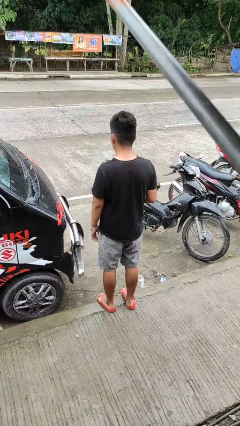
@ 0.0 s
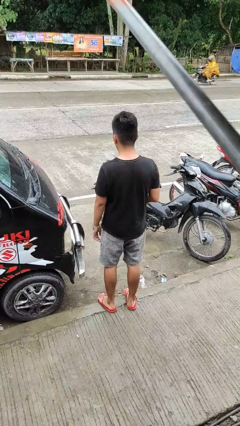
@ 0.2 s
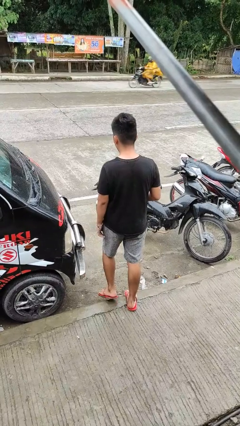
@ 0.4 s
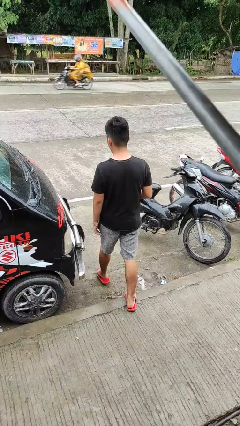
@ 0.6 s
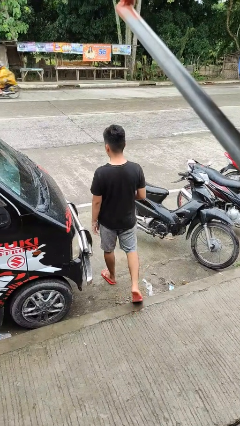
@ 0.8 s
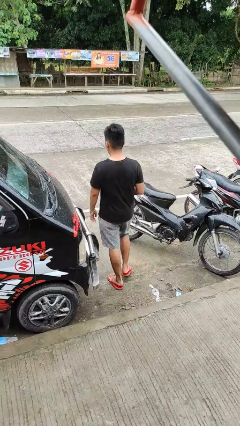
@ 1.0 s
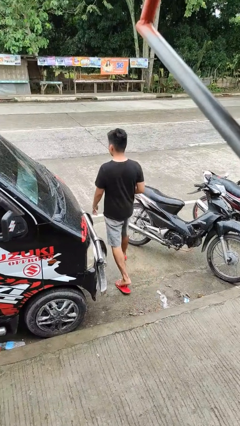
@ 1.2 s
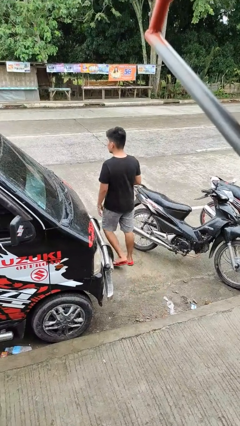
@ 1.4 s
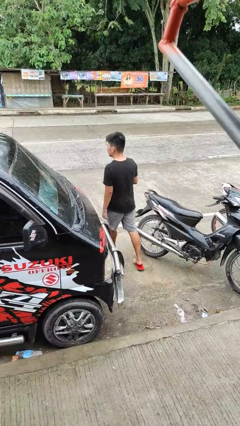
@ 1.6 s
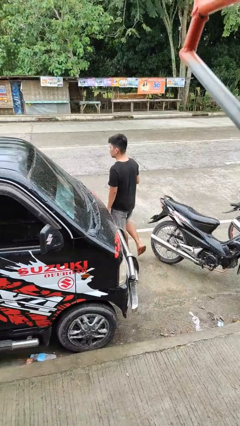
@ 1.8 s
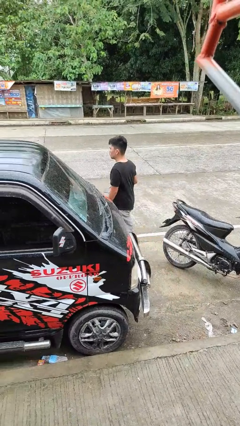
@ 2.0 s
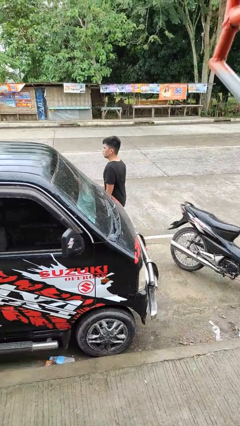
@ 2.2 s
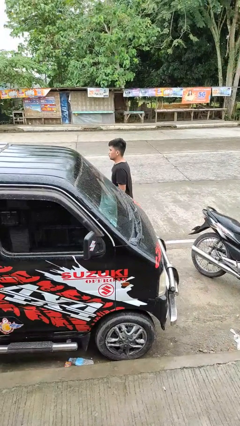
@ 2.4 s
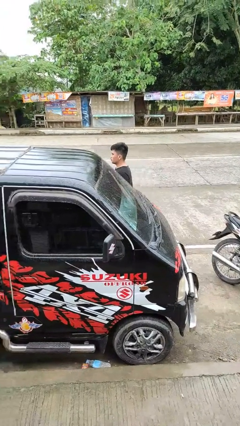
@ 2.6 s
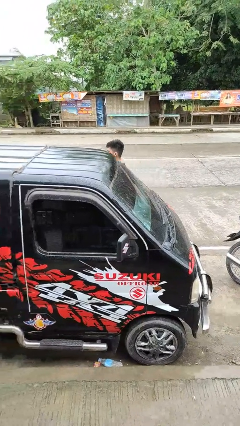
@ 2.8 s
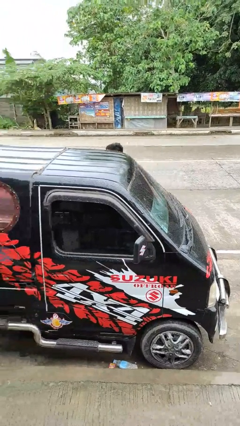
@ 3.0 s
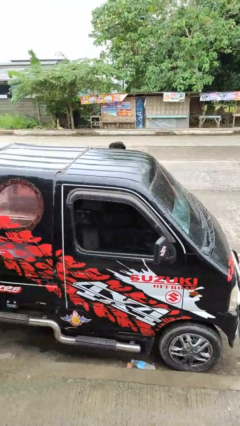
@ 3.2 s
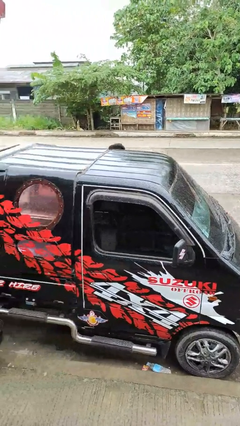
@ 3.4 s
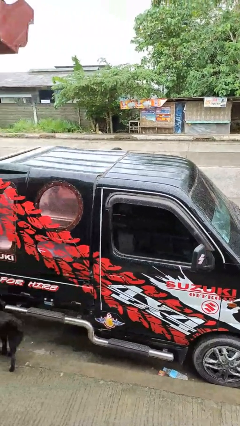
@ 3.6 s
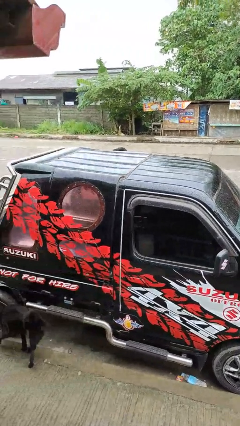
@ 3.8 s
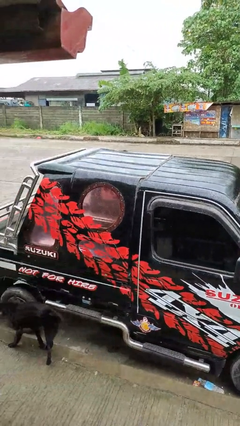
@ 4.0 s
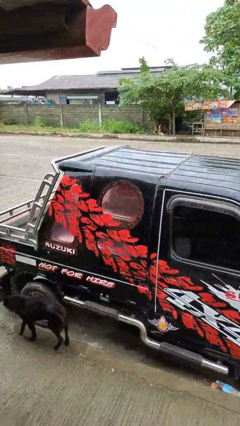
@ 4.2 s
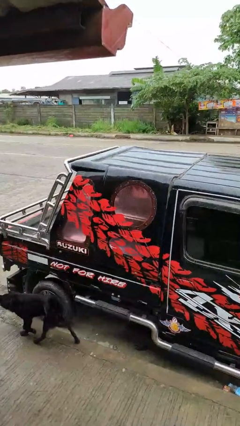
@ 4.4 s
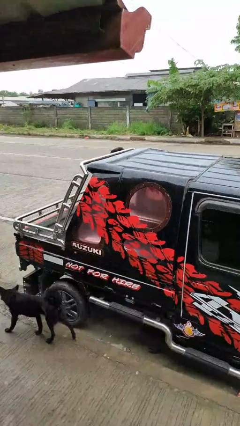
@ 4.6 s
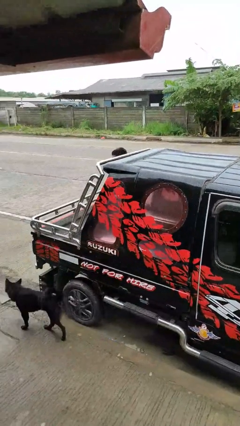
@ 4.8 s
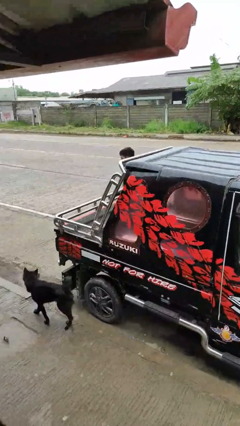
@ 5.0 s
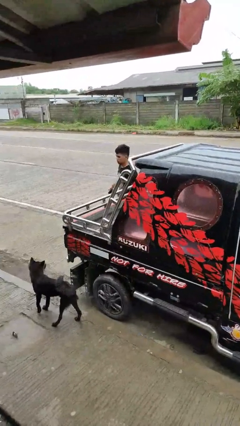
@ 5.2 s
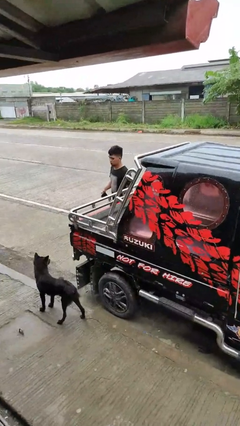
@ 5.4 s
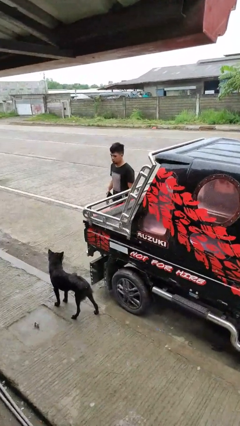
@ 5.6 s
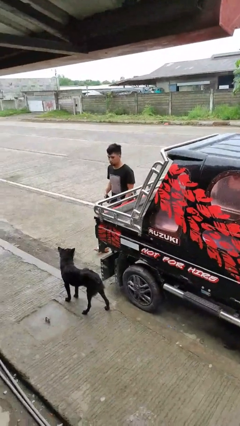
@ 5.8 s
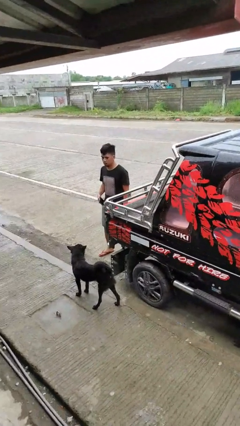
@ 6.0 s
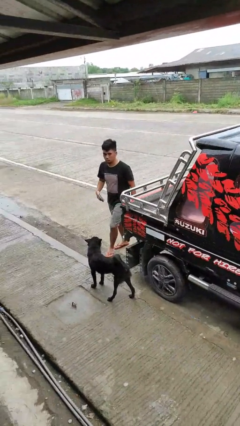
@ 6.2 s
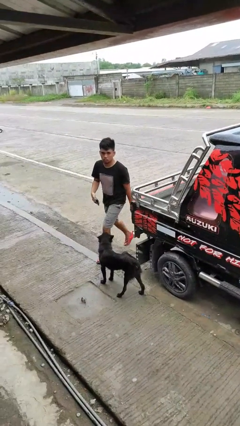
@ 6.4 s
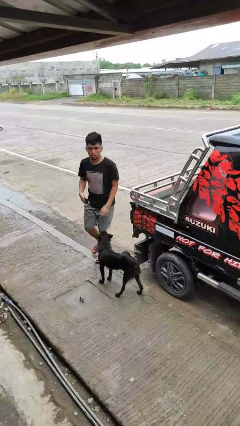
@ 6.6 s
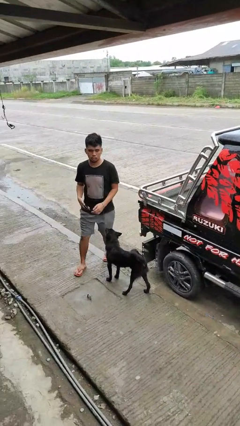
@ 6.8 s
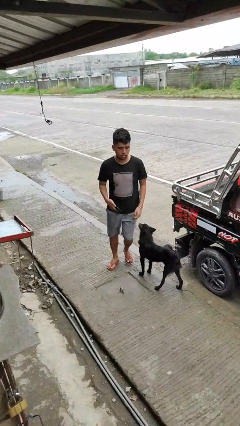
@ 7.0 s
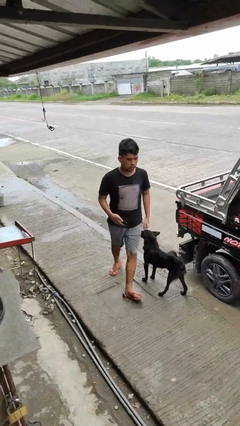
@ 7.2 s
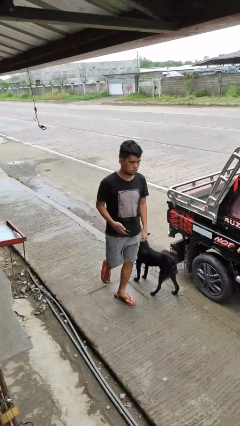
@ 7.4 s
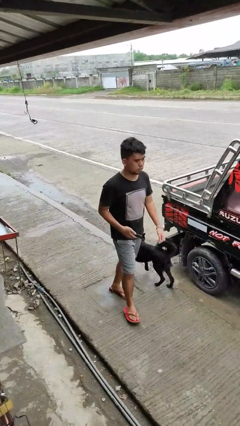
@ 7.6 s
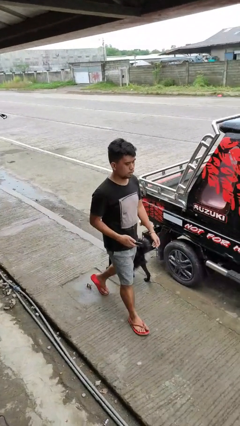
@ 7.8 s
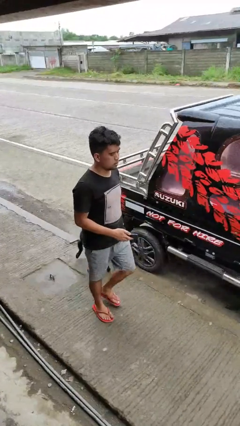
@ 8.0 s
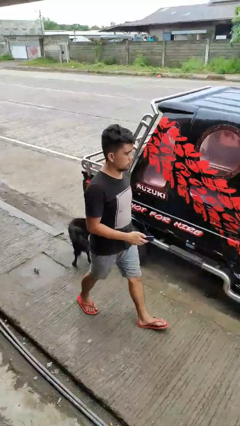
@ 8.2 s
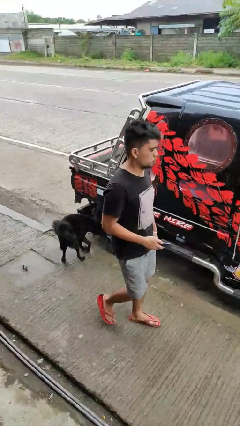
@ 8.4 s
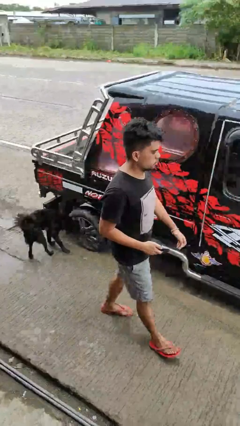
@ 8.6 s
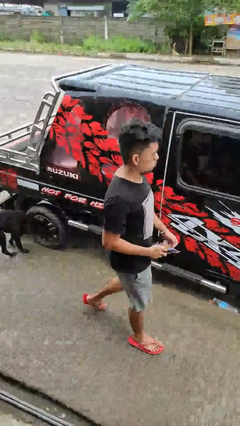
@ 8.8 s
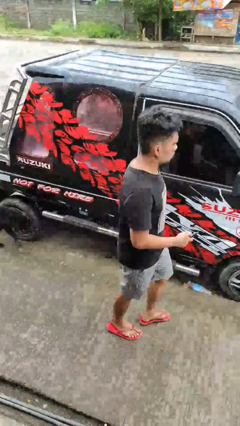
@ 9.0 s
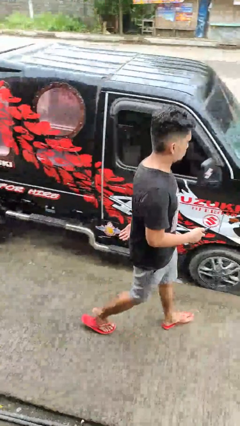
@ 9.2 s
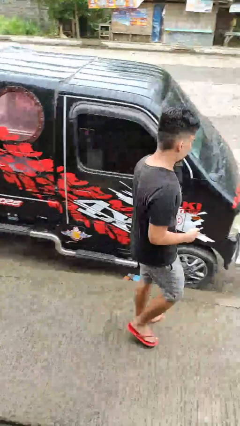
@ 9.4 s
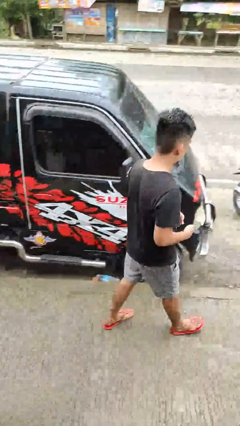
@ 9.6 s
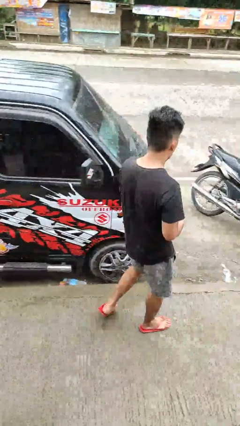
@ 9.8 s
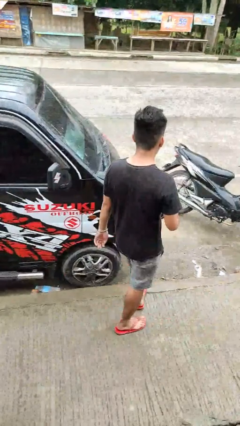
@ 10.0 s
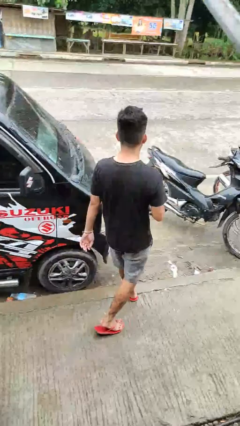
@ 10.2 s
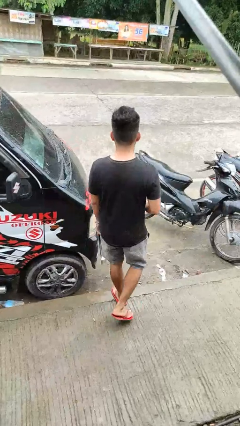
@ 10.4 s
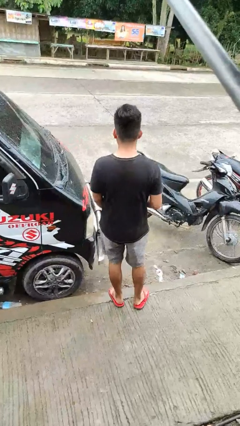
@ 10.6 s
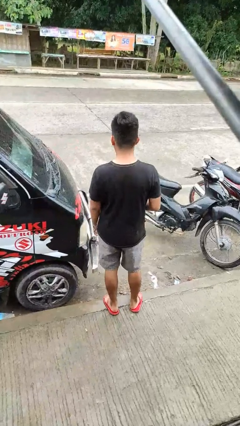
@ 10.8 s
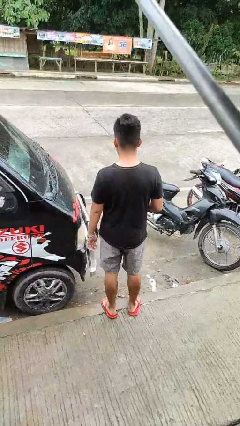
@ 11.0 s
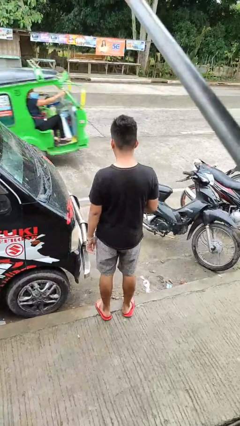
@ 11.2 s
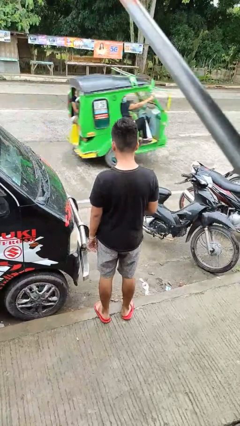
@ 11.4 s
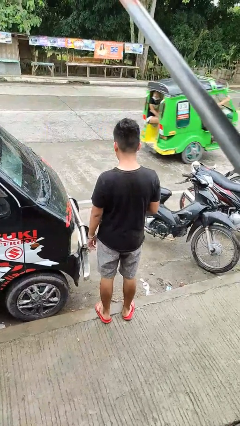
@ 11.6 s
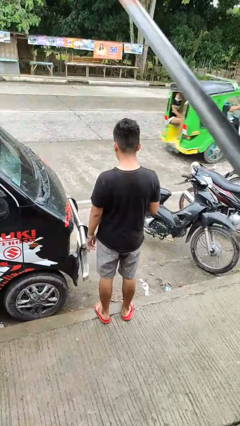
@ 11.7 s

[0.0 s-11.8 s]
person walks around car

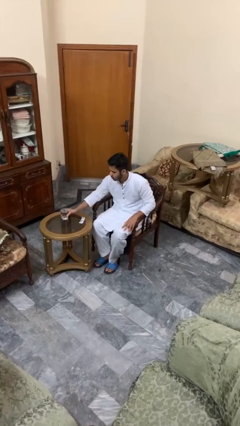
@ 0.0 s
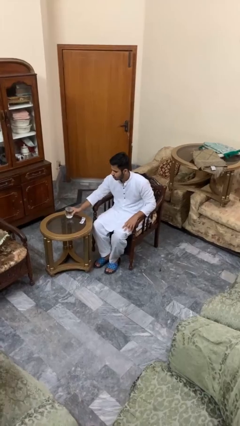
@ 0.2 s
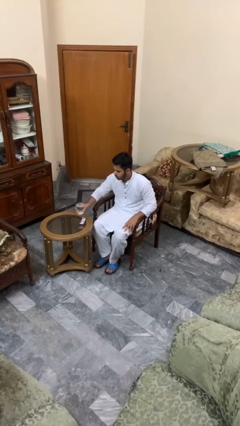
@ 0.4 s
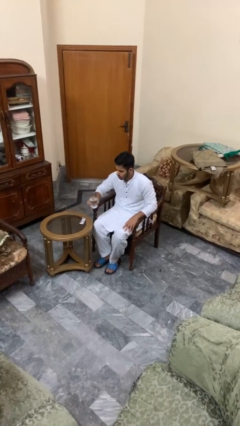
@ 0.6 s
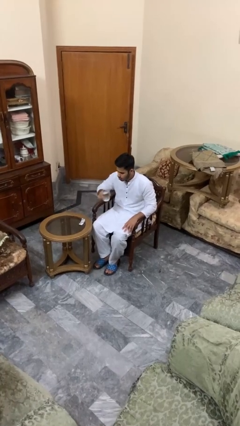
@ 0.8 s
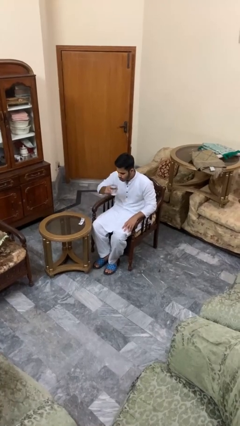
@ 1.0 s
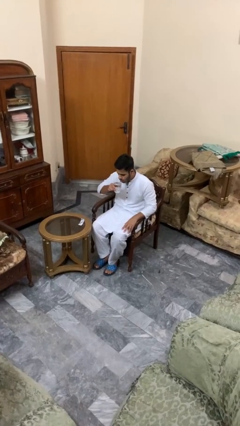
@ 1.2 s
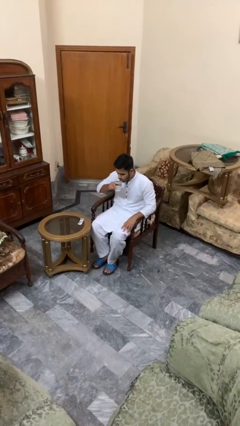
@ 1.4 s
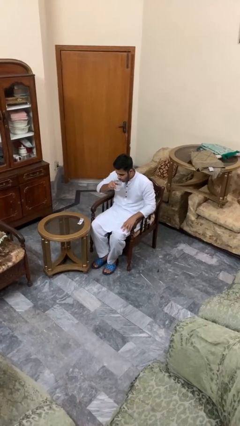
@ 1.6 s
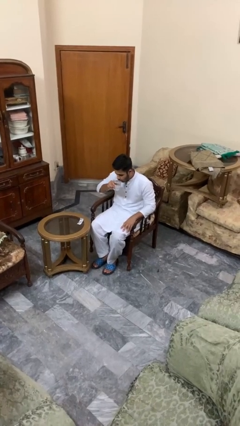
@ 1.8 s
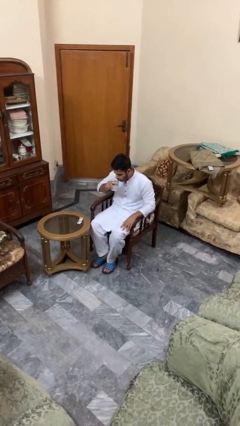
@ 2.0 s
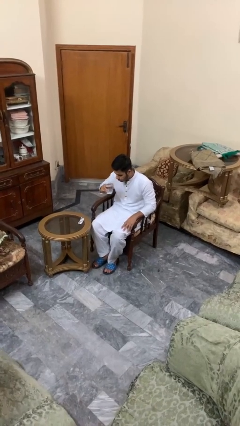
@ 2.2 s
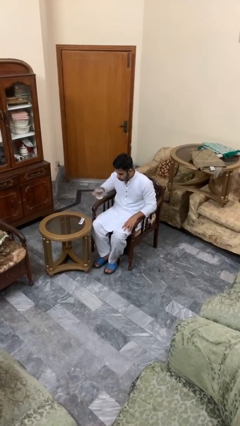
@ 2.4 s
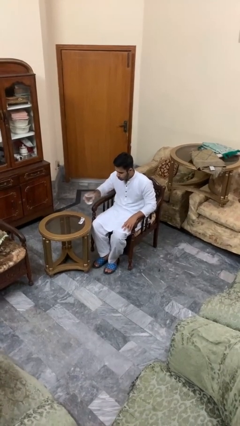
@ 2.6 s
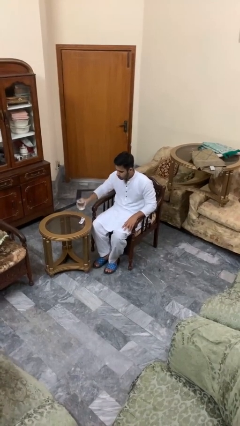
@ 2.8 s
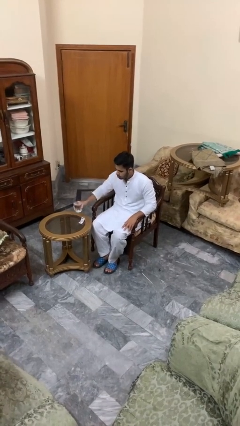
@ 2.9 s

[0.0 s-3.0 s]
person drinks from cup

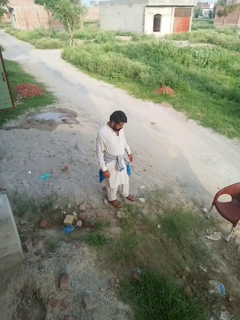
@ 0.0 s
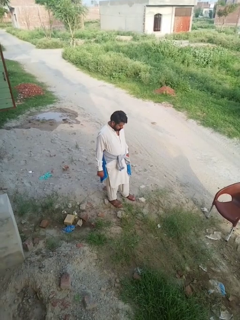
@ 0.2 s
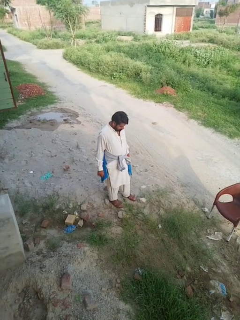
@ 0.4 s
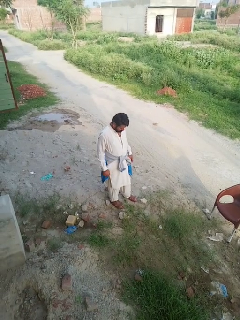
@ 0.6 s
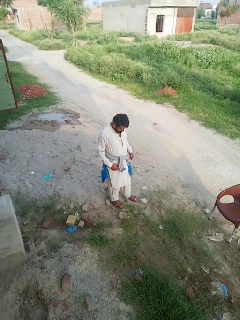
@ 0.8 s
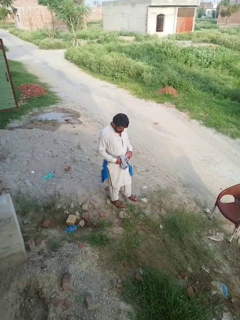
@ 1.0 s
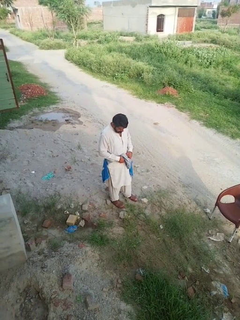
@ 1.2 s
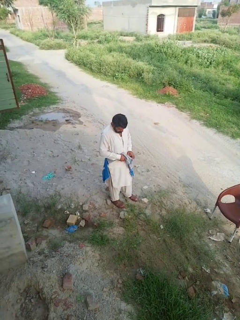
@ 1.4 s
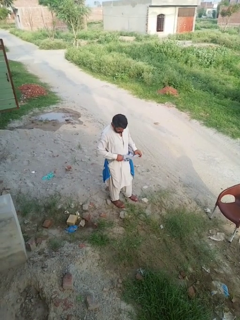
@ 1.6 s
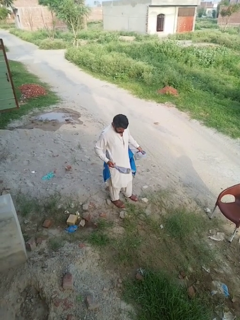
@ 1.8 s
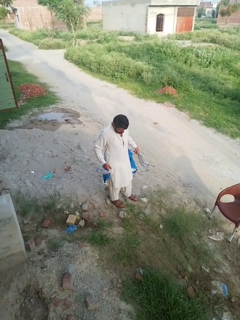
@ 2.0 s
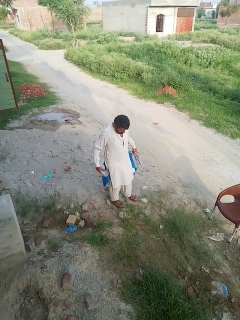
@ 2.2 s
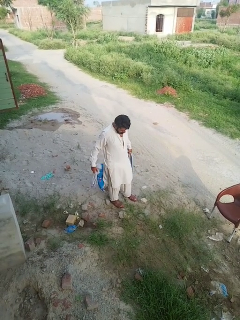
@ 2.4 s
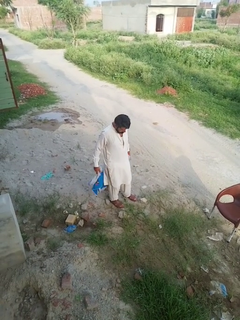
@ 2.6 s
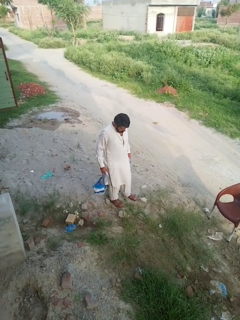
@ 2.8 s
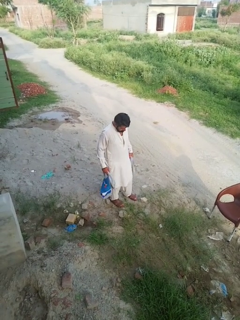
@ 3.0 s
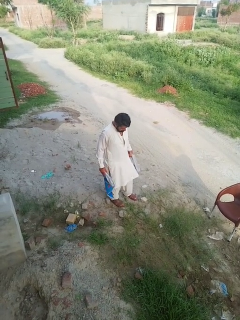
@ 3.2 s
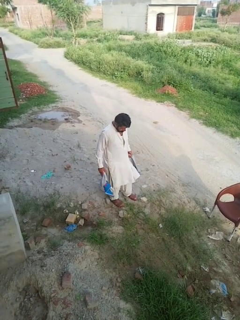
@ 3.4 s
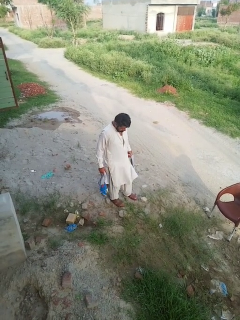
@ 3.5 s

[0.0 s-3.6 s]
person unties jacket around waist

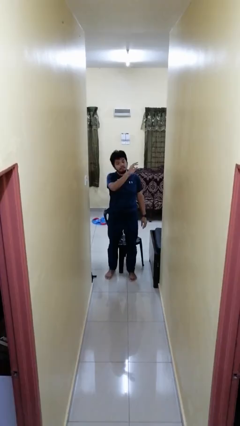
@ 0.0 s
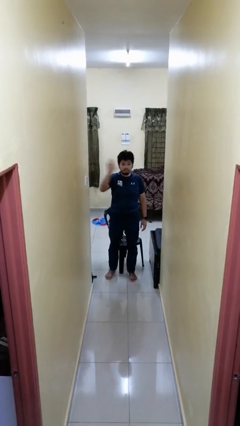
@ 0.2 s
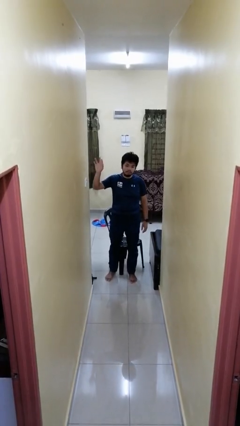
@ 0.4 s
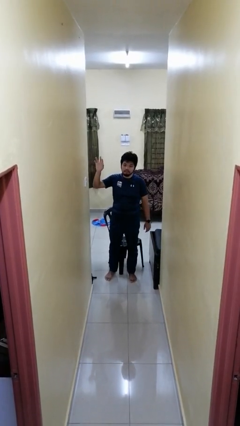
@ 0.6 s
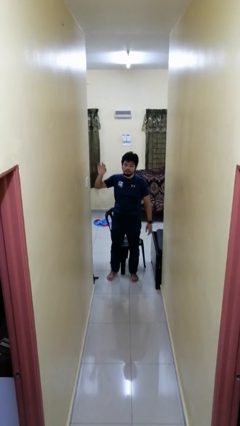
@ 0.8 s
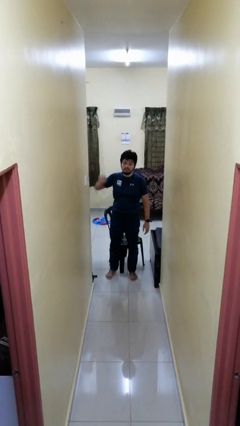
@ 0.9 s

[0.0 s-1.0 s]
person gestures swipe right
